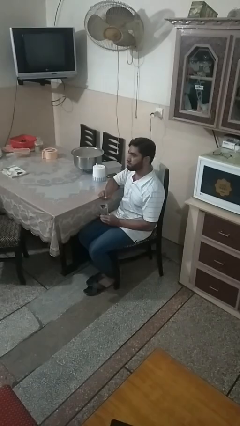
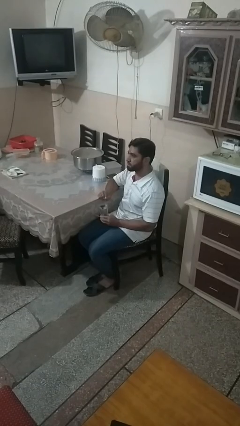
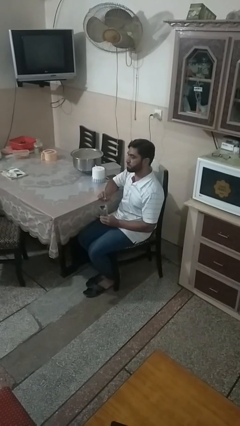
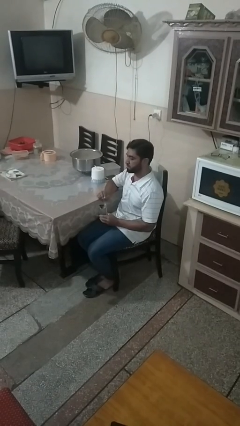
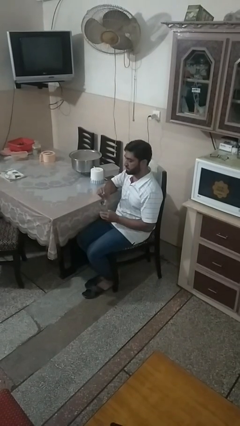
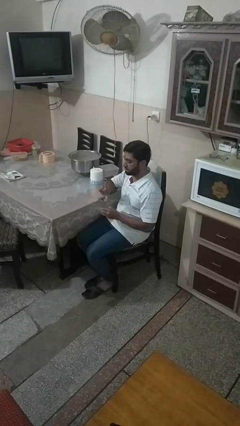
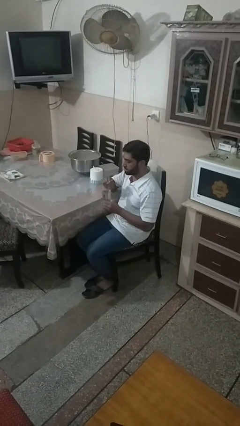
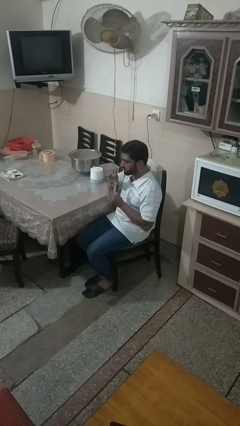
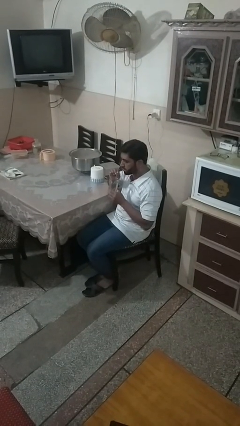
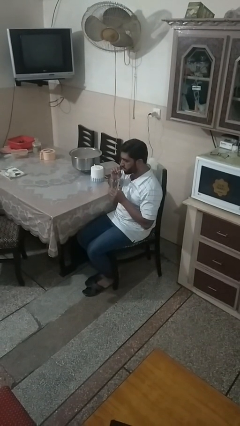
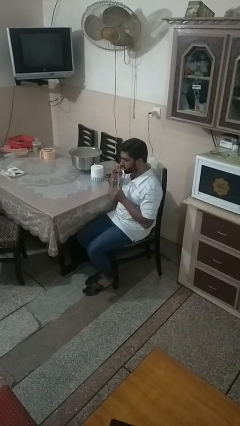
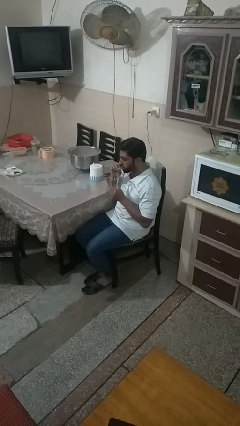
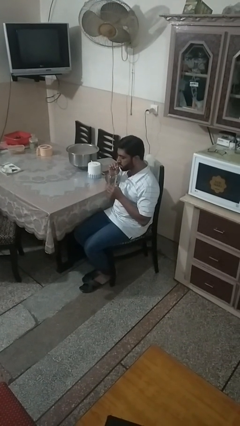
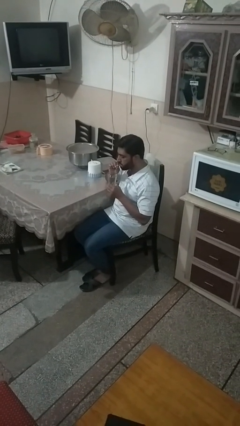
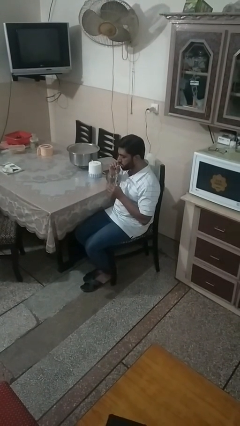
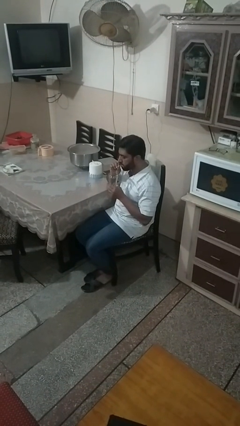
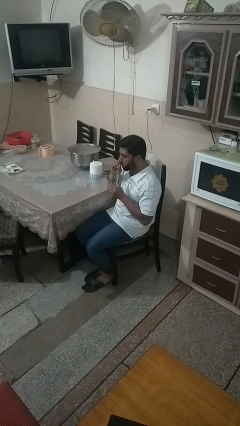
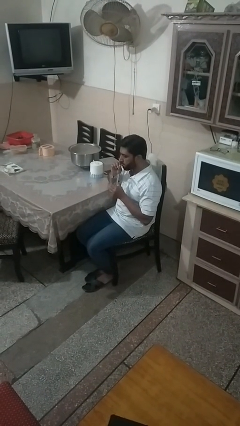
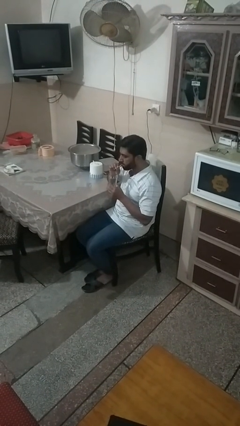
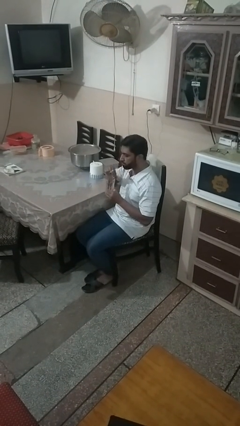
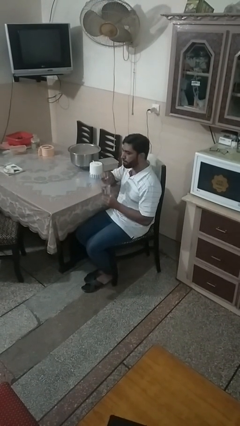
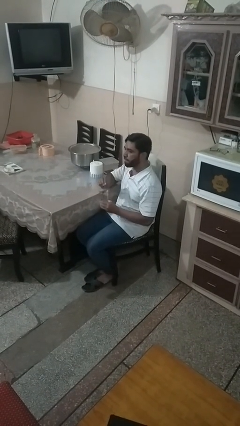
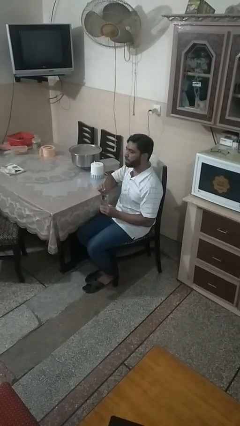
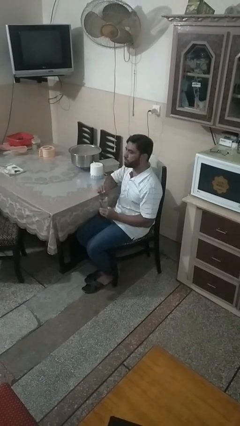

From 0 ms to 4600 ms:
person drinks from straw

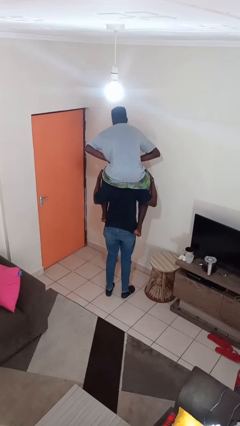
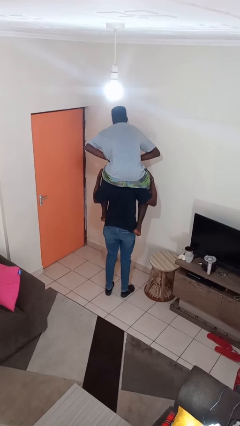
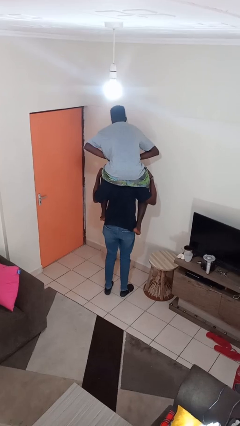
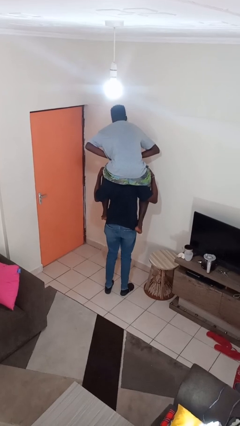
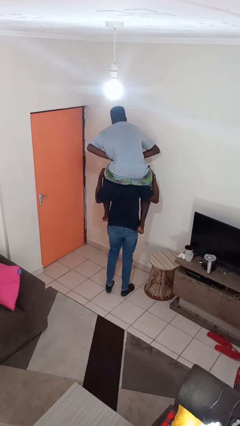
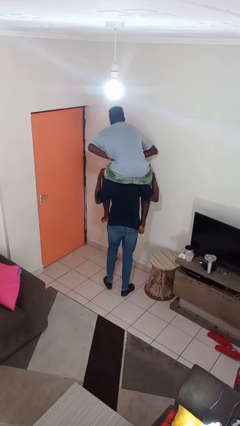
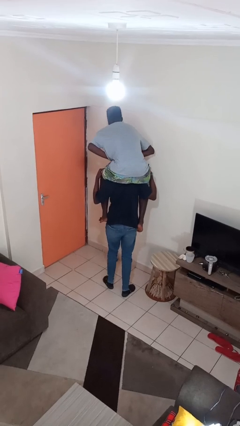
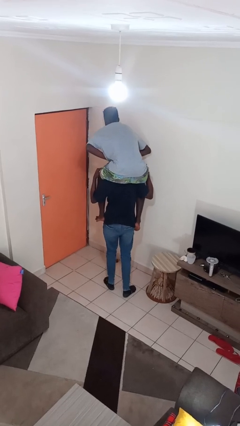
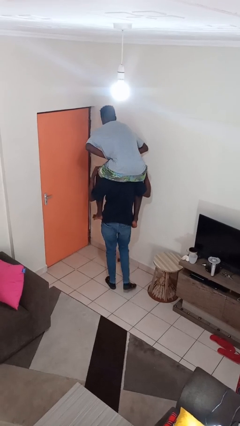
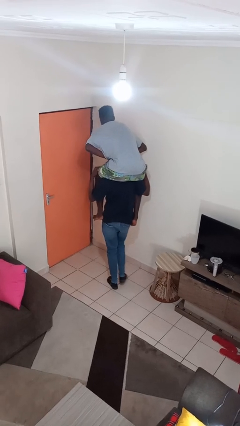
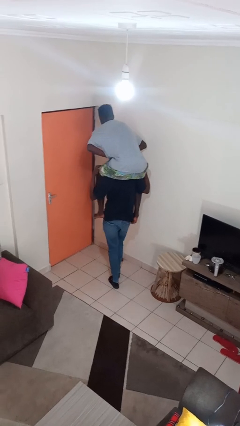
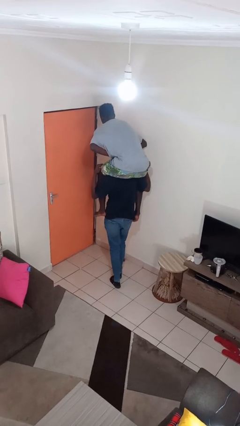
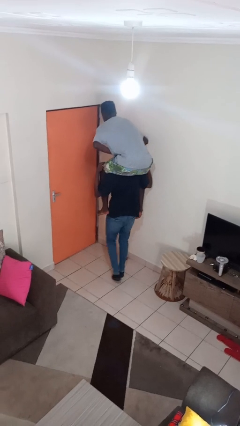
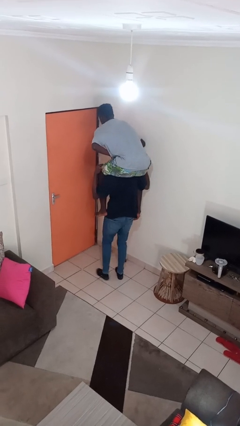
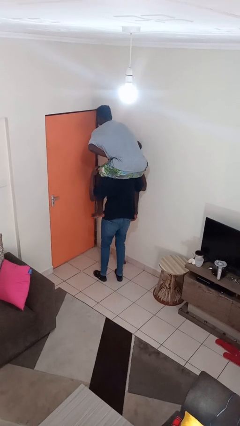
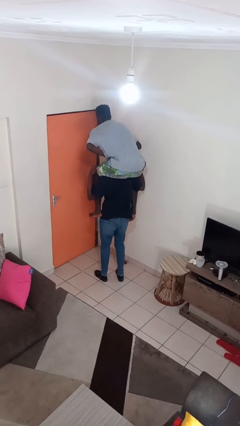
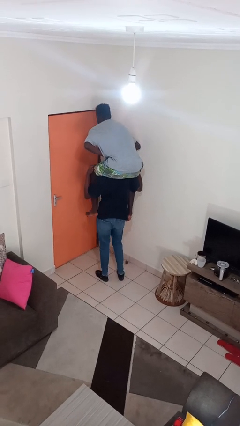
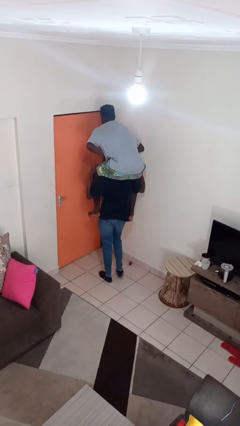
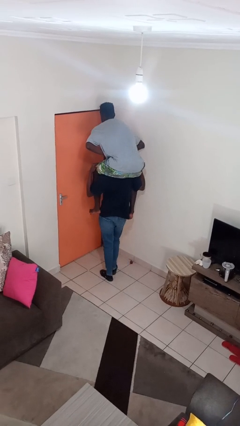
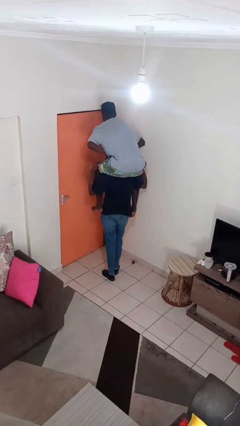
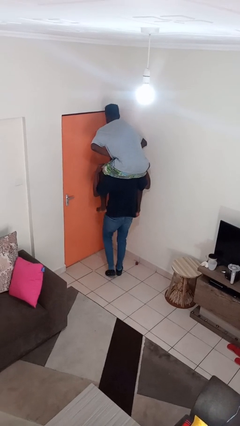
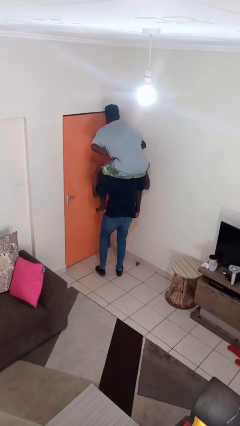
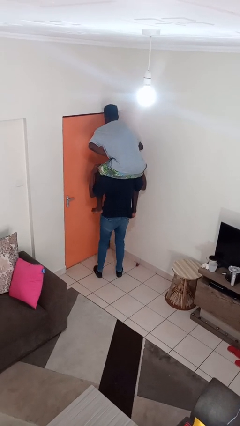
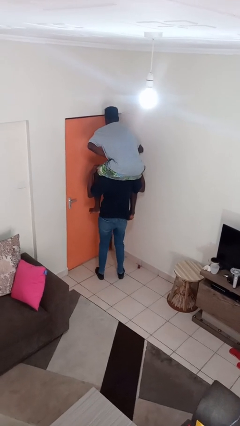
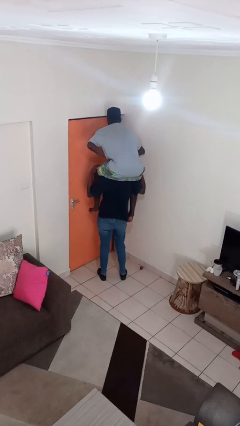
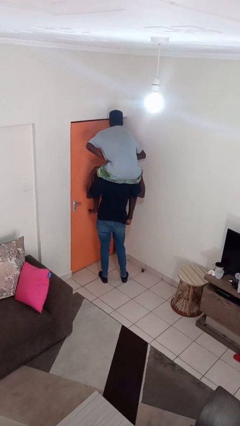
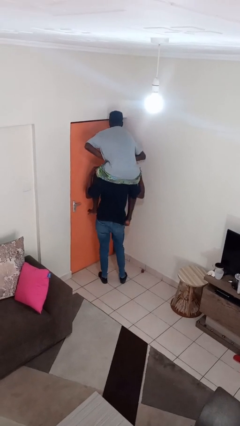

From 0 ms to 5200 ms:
person carries person on shoulders

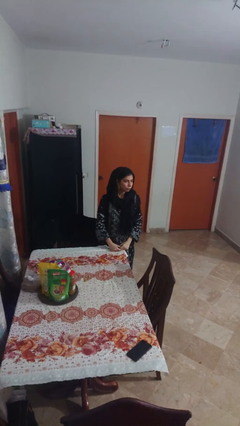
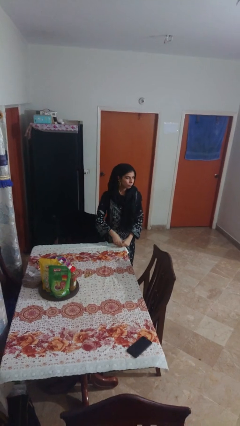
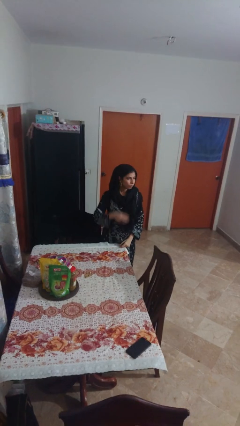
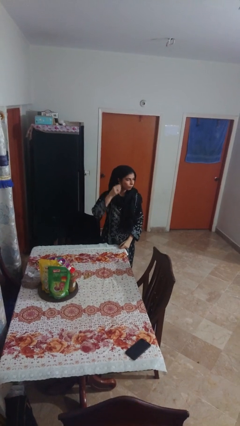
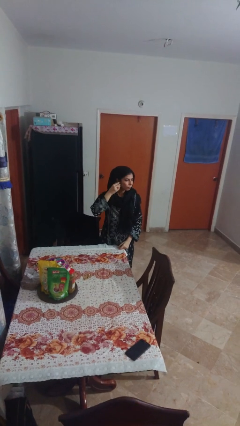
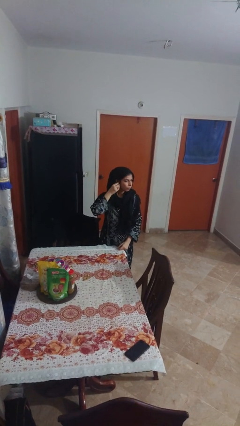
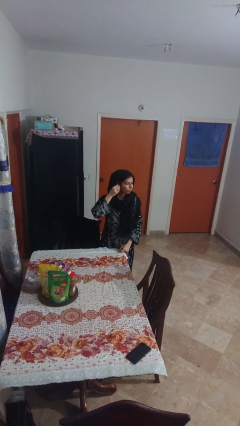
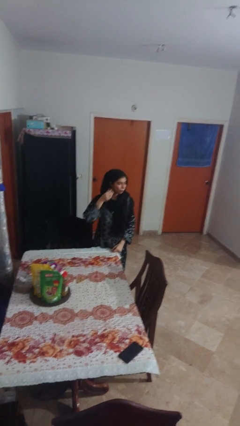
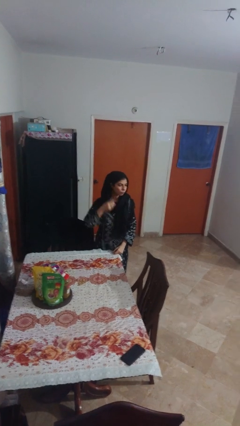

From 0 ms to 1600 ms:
person takes off earrings

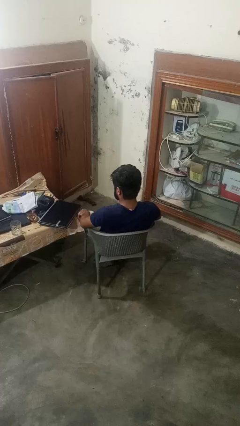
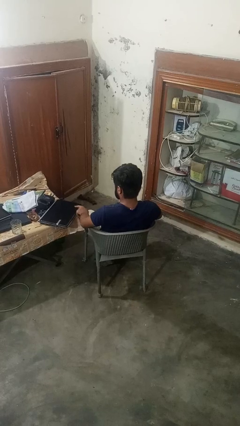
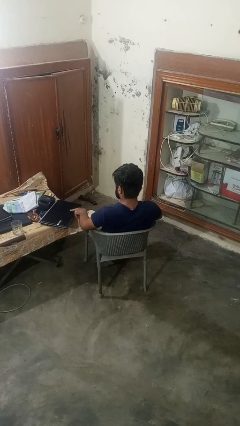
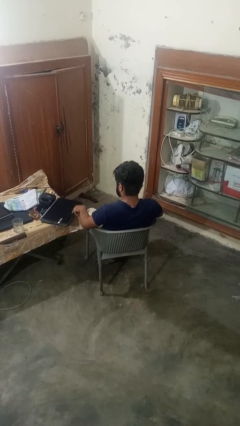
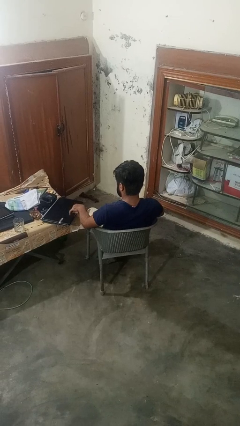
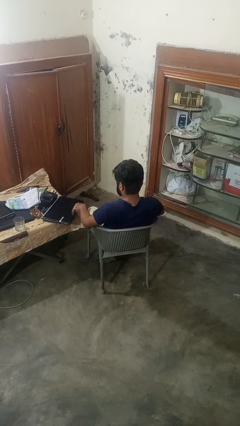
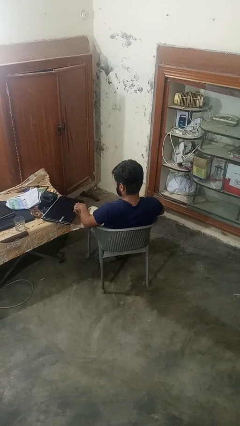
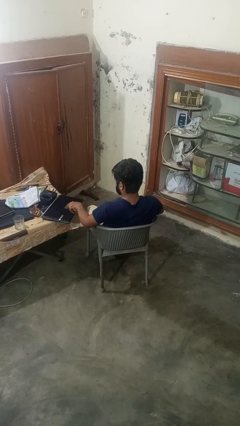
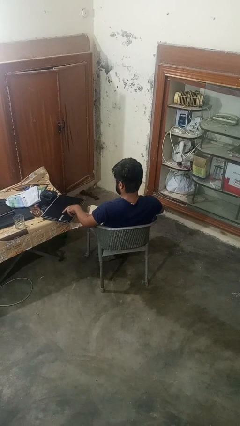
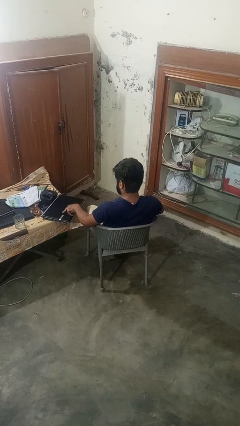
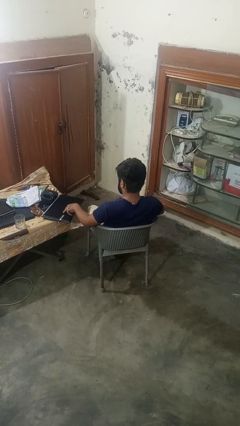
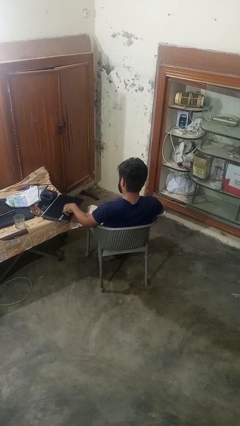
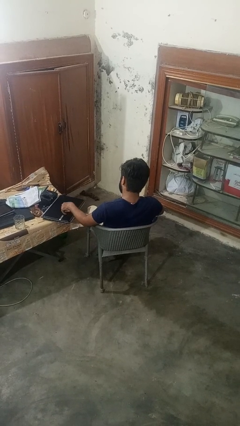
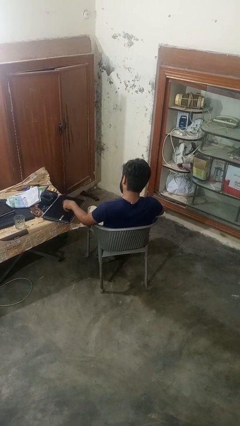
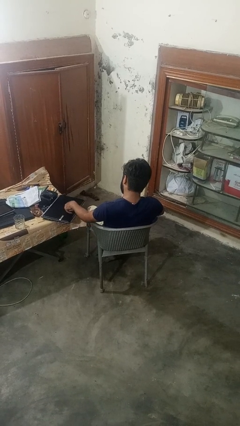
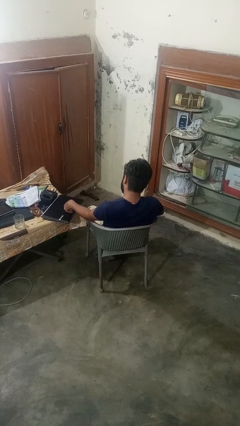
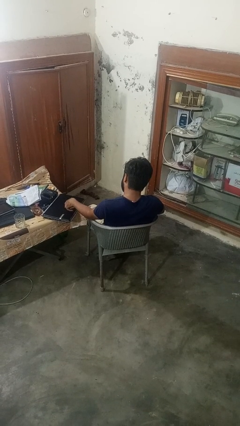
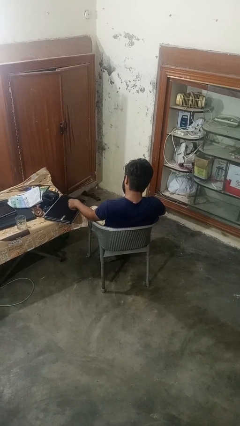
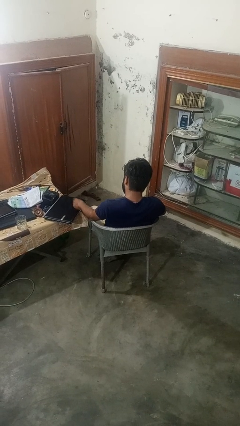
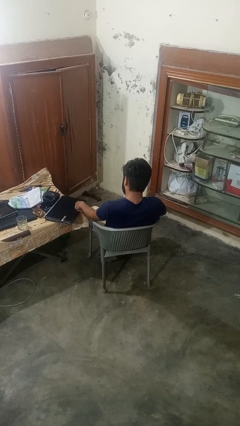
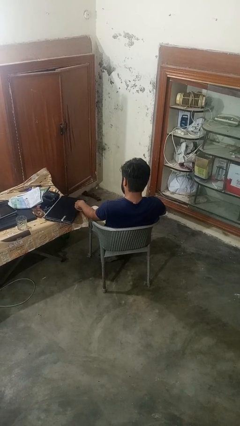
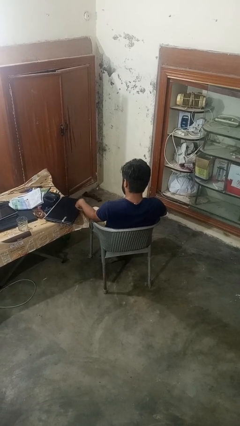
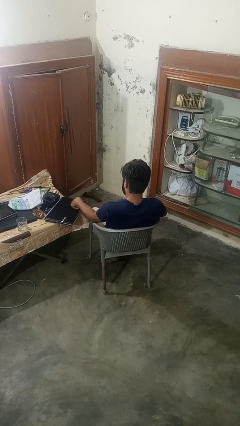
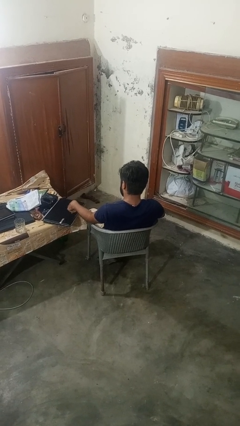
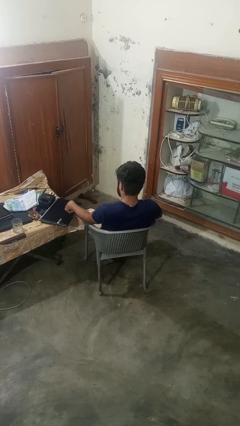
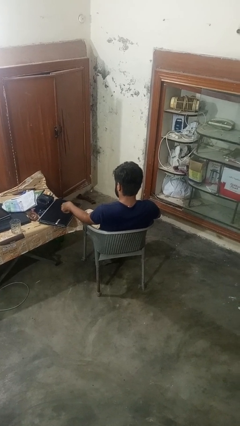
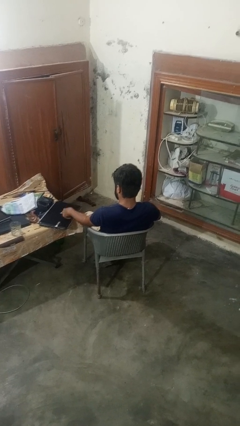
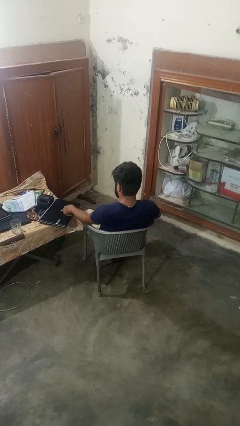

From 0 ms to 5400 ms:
person taps object with finger

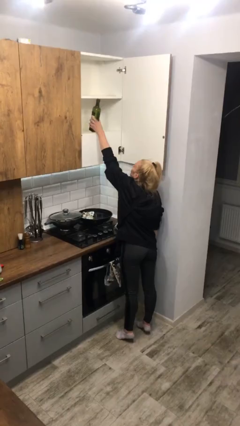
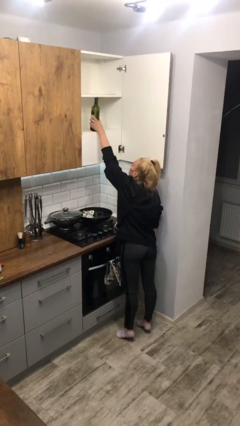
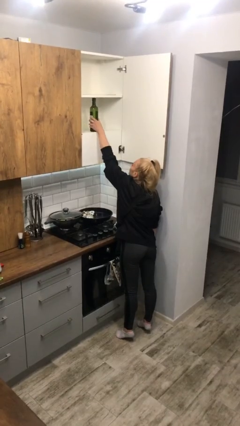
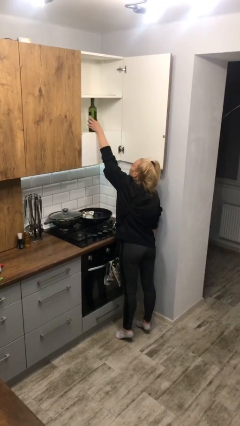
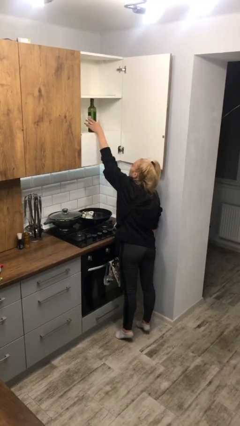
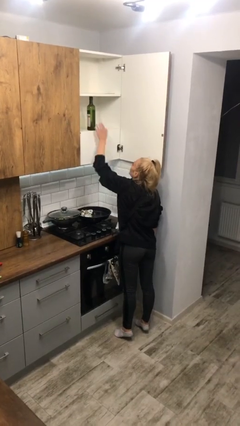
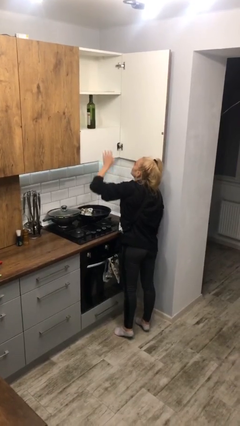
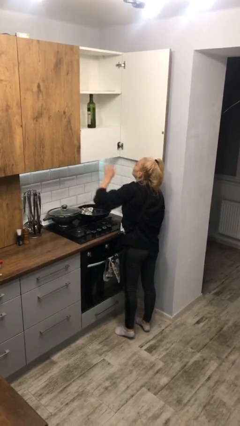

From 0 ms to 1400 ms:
person puts down object on shelf
